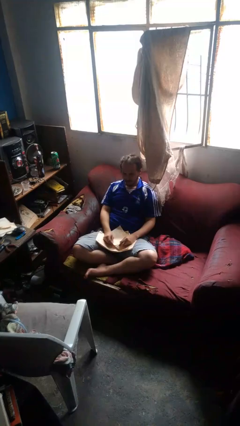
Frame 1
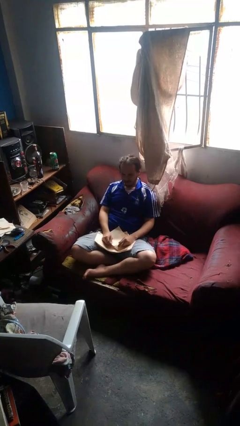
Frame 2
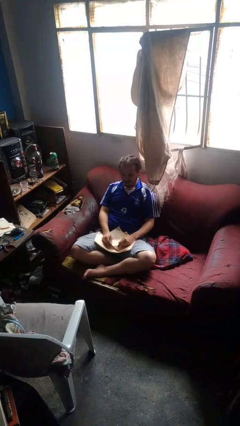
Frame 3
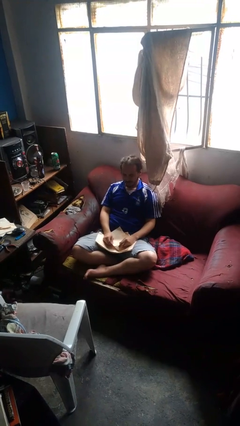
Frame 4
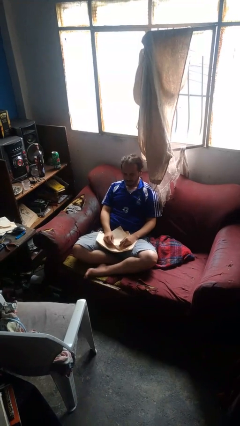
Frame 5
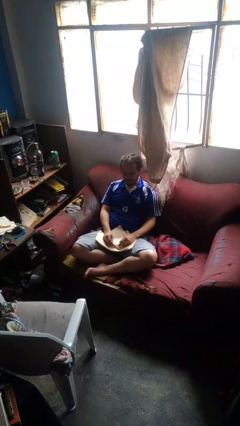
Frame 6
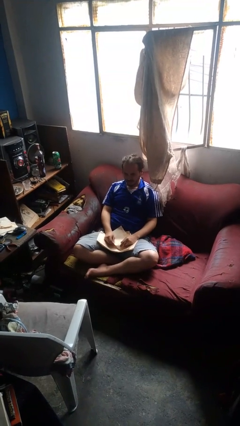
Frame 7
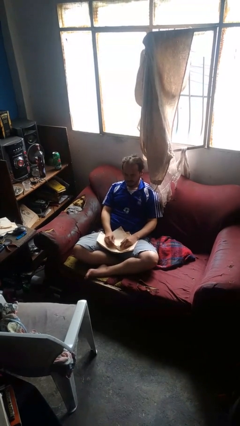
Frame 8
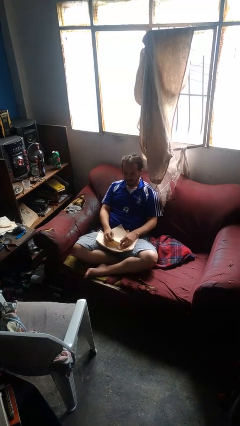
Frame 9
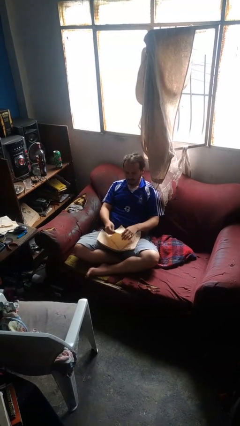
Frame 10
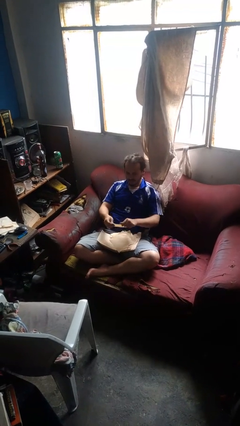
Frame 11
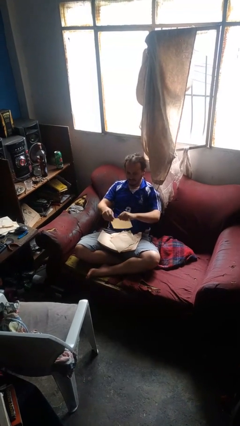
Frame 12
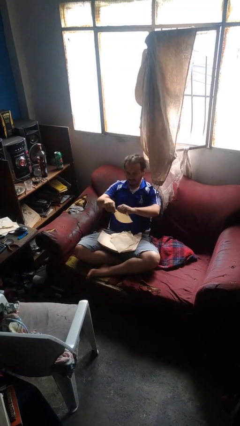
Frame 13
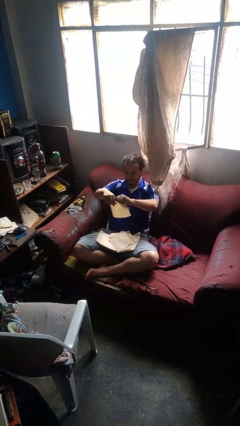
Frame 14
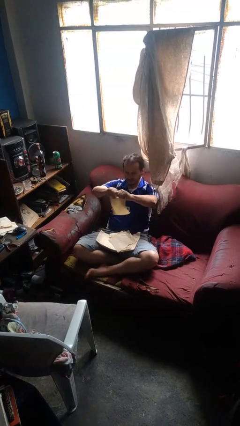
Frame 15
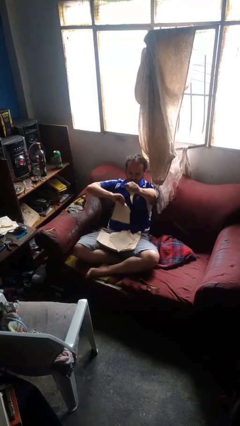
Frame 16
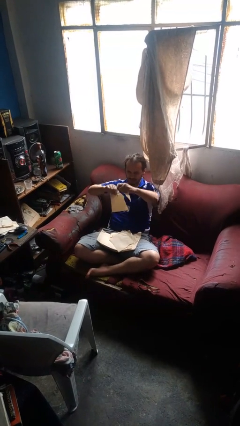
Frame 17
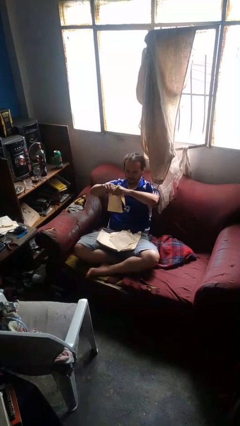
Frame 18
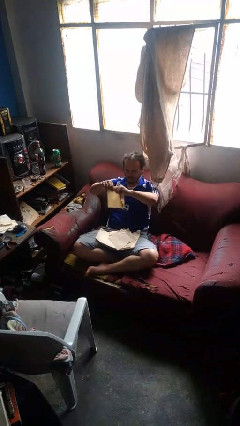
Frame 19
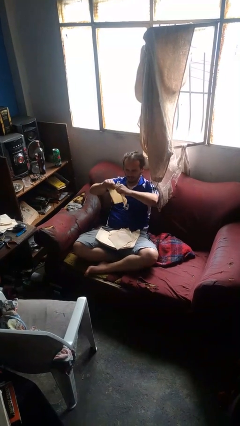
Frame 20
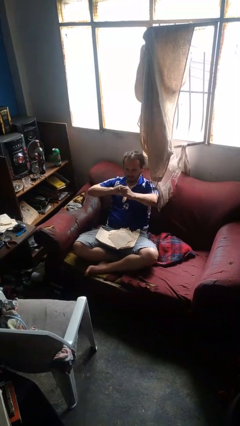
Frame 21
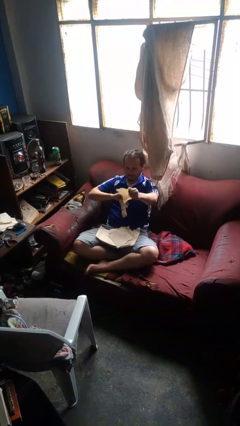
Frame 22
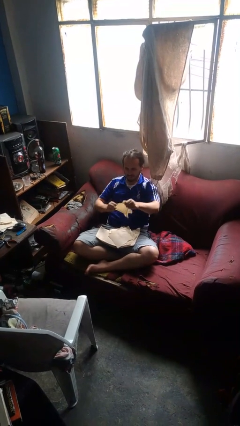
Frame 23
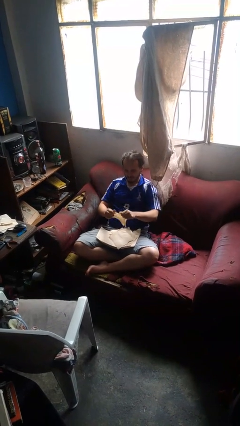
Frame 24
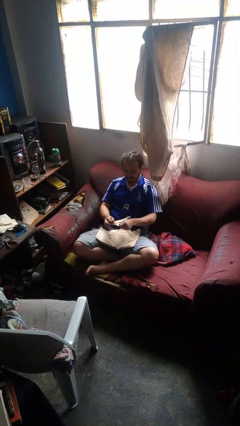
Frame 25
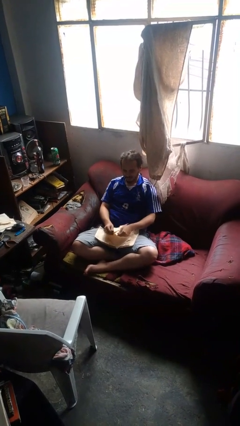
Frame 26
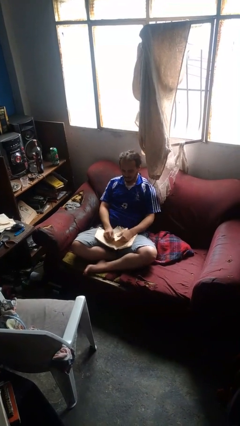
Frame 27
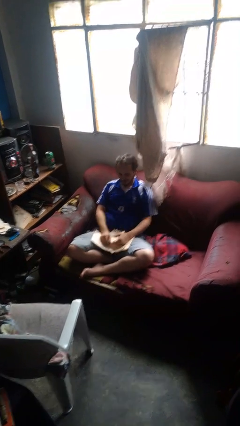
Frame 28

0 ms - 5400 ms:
person tears paper

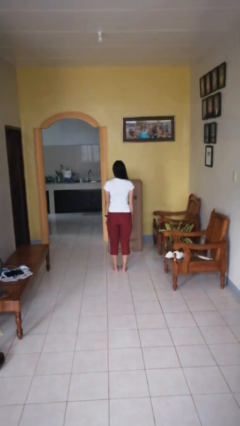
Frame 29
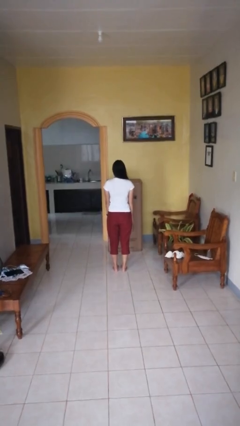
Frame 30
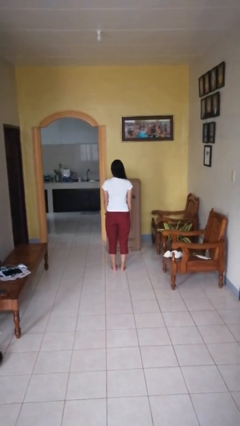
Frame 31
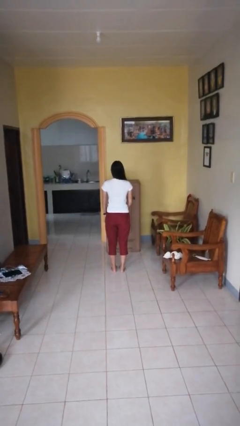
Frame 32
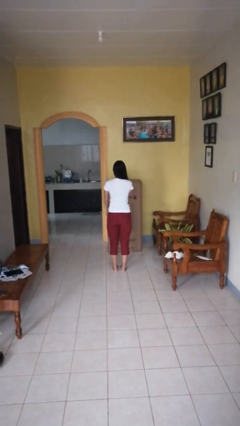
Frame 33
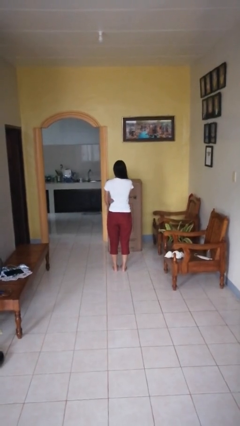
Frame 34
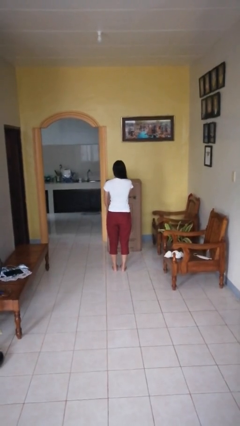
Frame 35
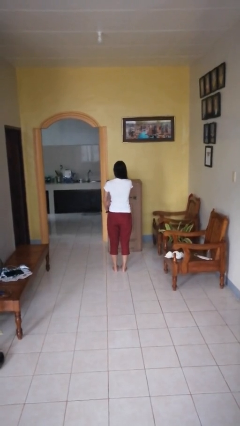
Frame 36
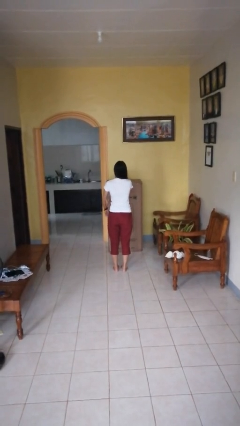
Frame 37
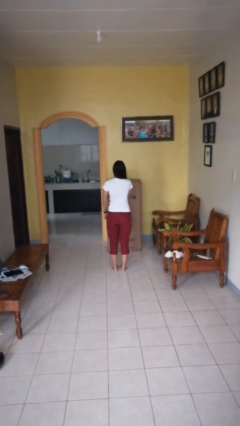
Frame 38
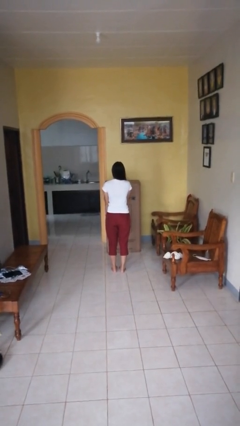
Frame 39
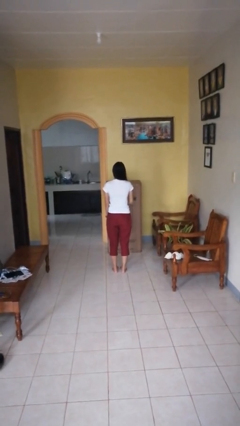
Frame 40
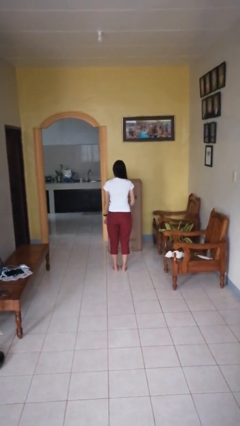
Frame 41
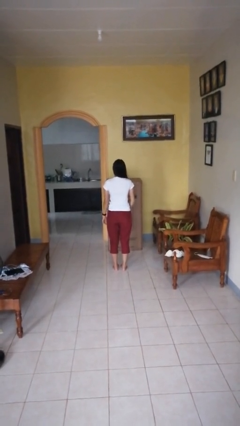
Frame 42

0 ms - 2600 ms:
person swats bug

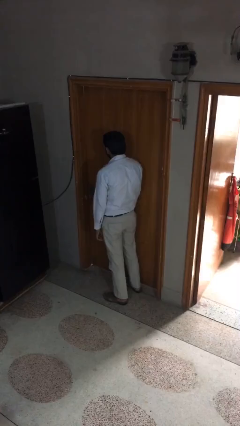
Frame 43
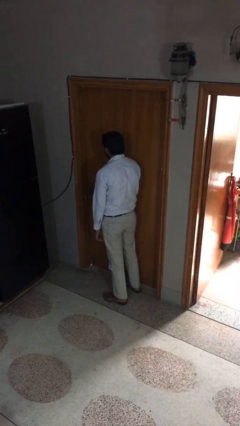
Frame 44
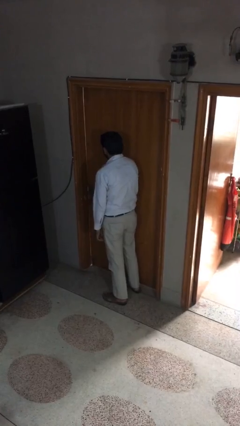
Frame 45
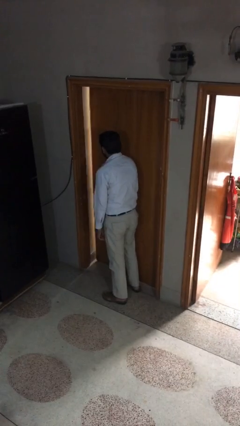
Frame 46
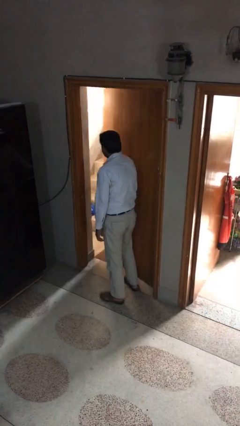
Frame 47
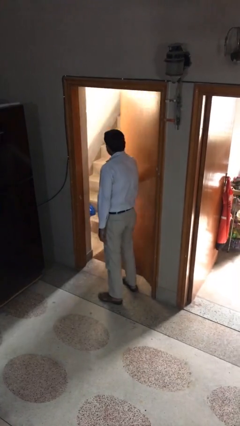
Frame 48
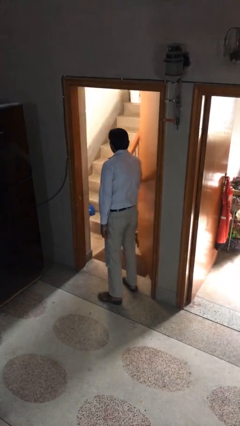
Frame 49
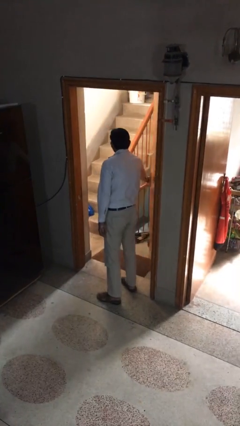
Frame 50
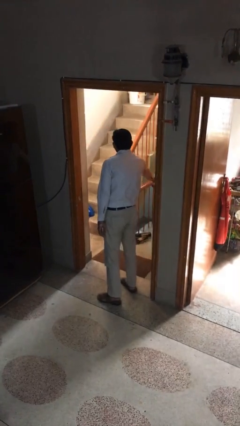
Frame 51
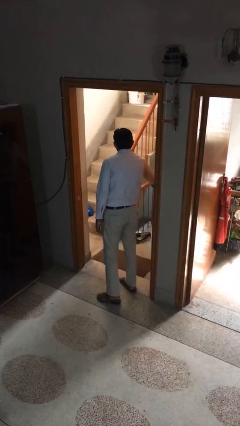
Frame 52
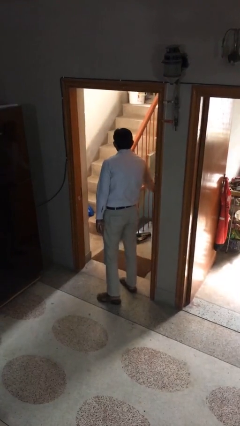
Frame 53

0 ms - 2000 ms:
person opens facility door

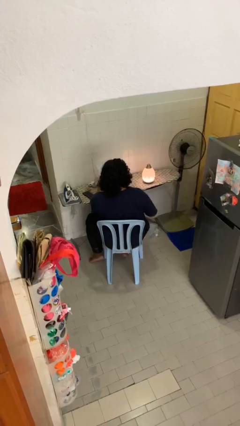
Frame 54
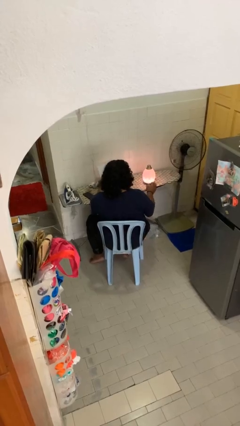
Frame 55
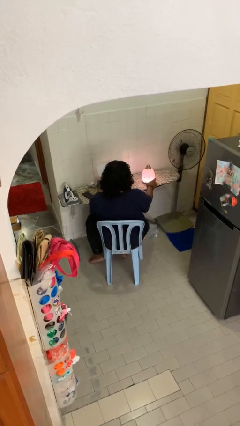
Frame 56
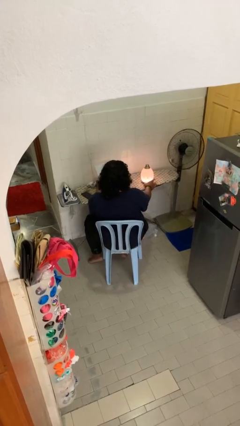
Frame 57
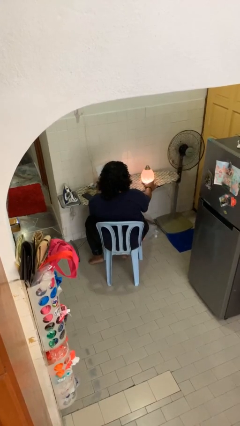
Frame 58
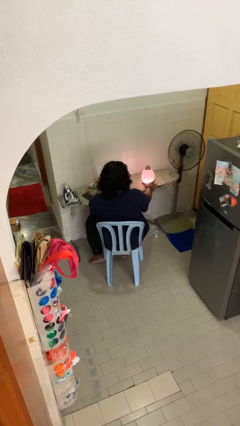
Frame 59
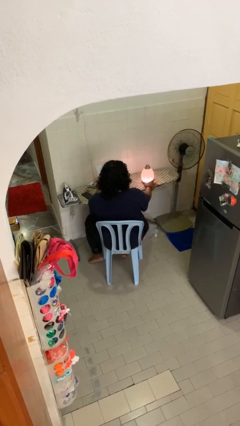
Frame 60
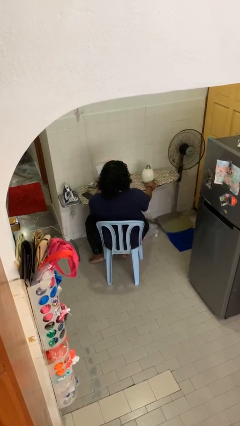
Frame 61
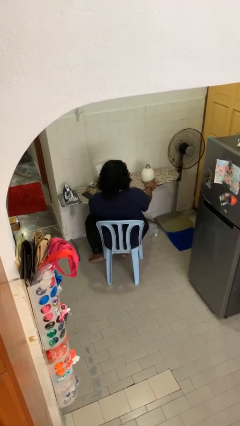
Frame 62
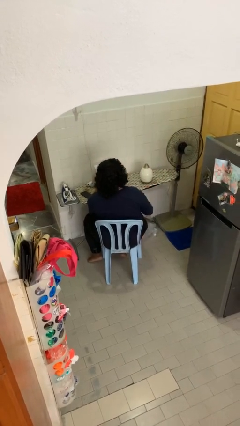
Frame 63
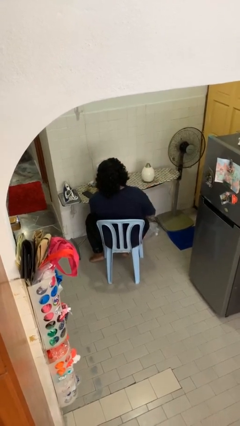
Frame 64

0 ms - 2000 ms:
person turns off lamp

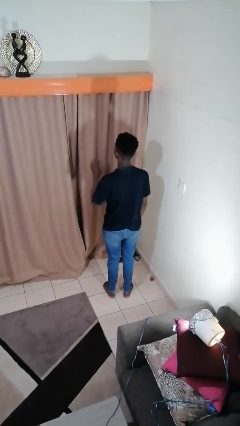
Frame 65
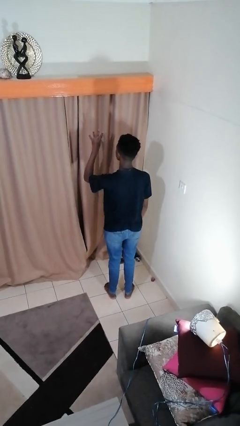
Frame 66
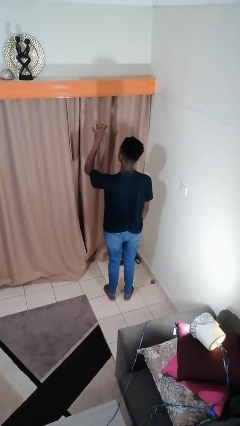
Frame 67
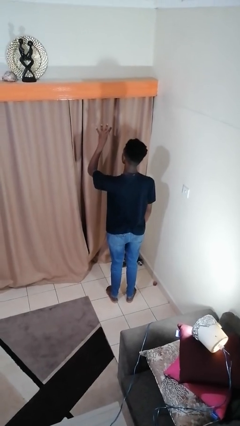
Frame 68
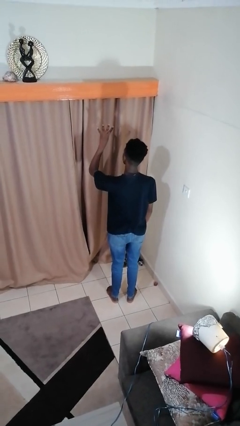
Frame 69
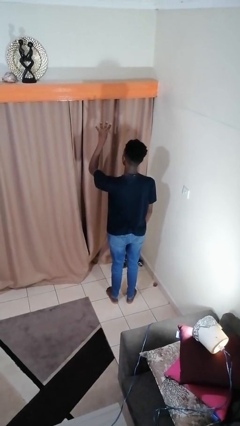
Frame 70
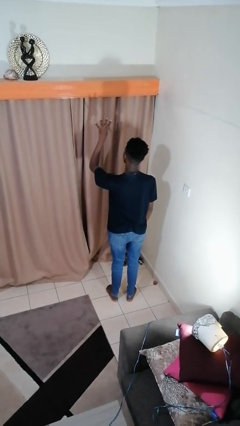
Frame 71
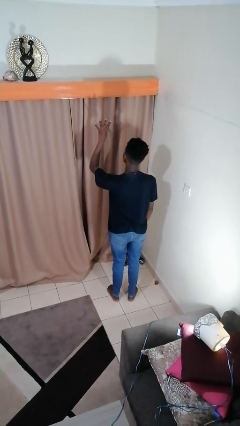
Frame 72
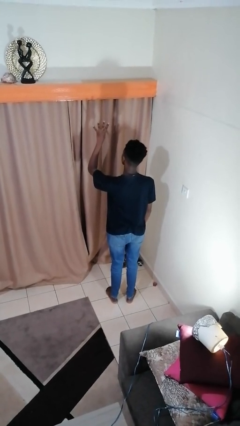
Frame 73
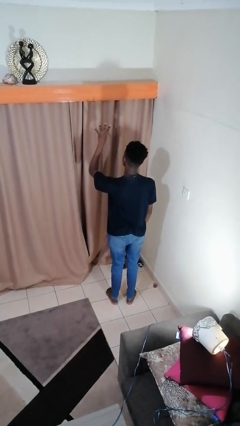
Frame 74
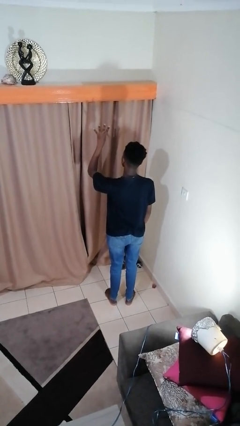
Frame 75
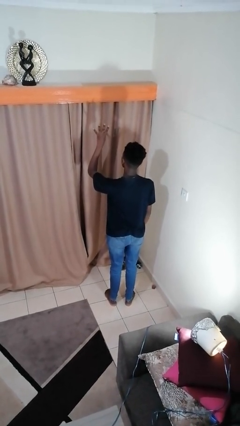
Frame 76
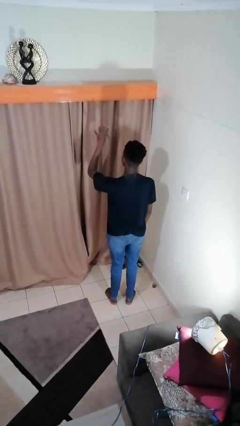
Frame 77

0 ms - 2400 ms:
person gestures number four

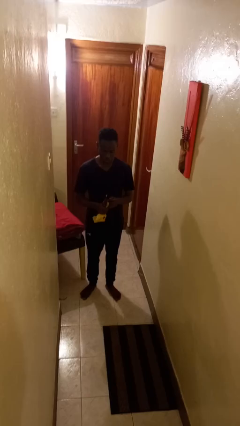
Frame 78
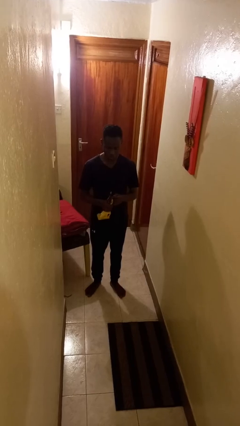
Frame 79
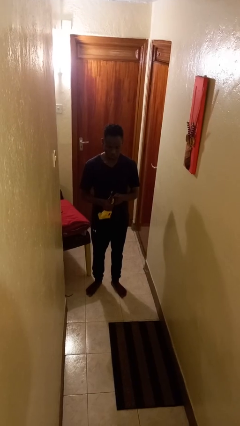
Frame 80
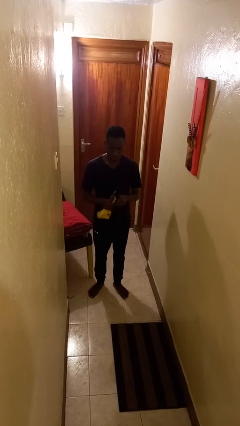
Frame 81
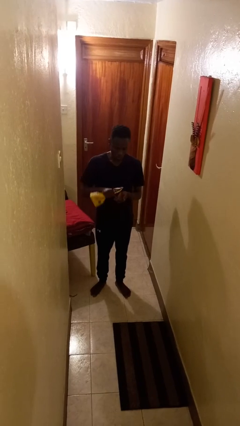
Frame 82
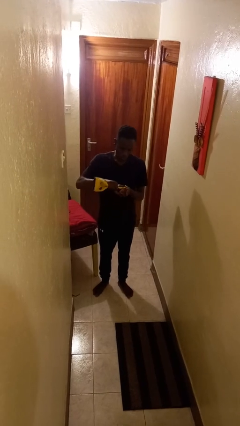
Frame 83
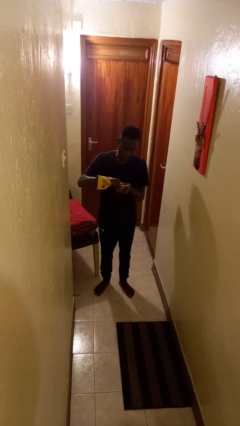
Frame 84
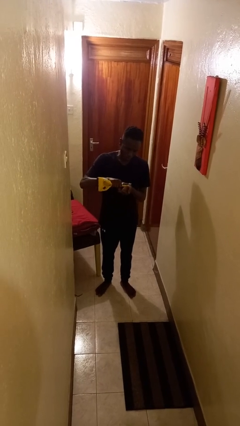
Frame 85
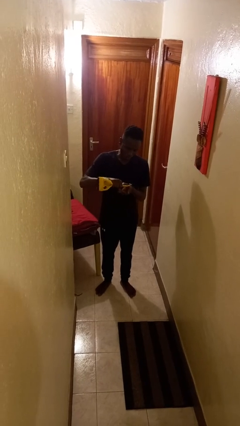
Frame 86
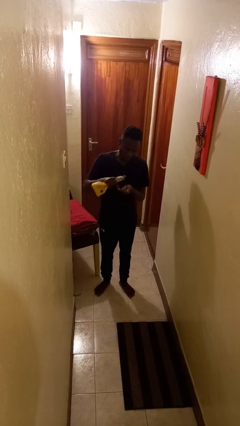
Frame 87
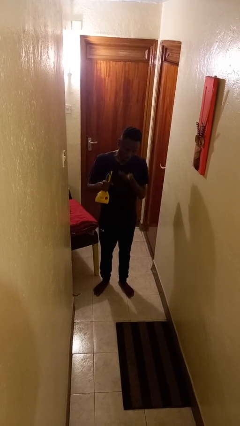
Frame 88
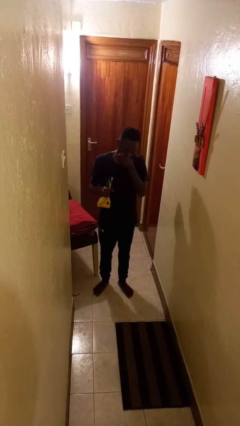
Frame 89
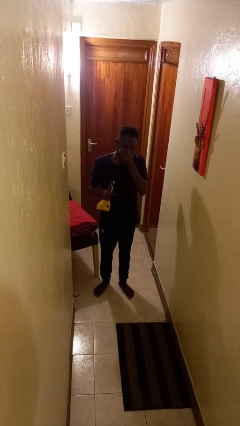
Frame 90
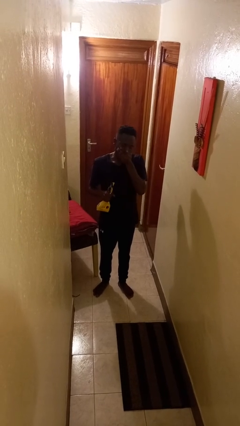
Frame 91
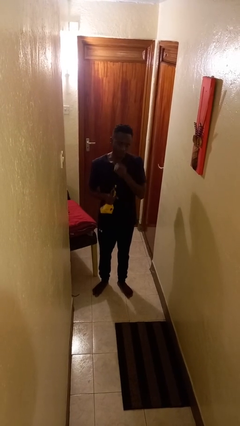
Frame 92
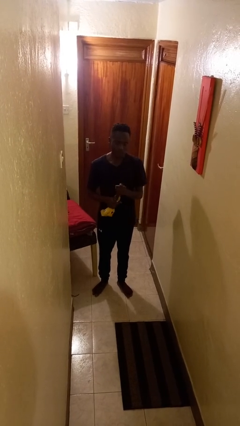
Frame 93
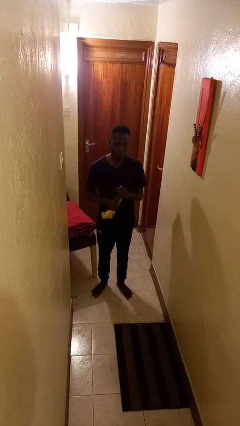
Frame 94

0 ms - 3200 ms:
person eats snack from bag

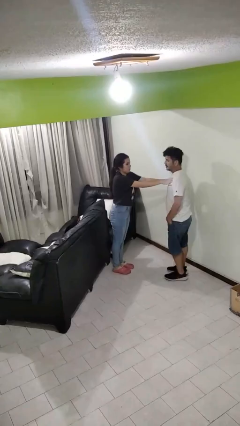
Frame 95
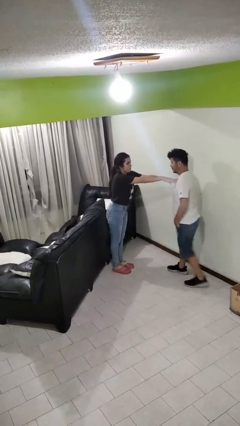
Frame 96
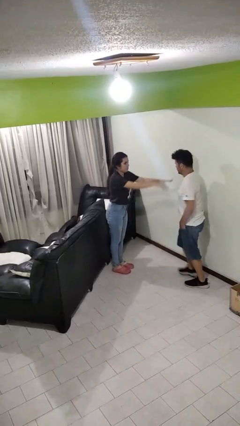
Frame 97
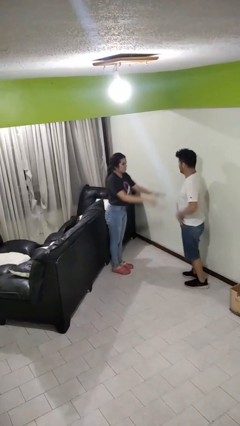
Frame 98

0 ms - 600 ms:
person shoves person
